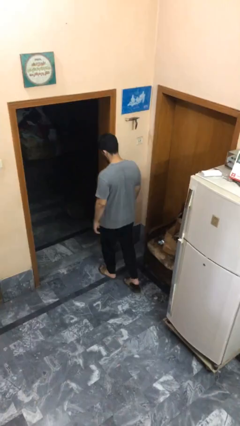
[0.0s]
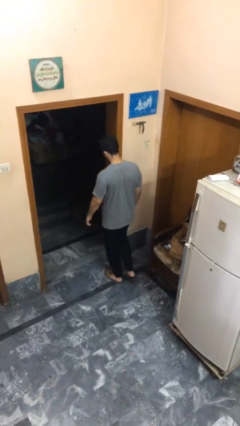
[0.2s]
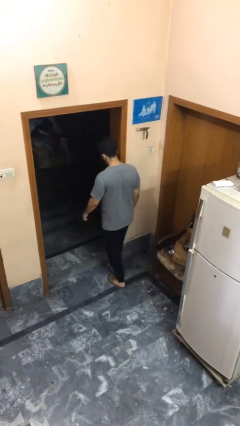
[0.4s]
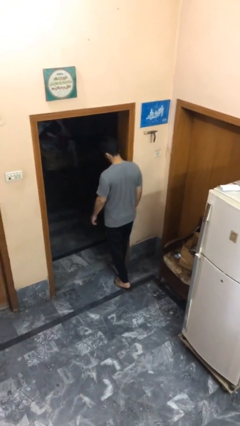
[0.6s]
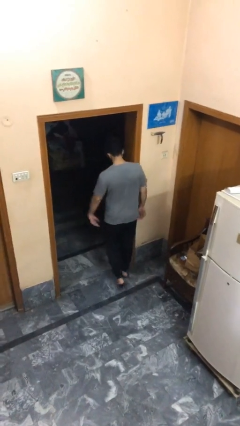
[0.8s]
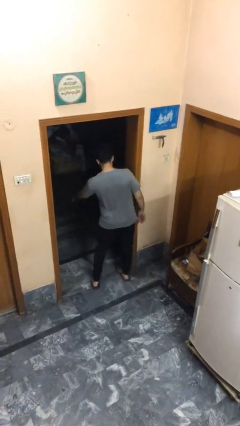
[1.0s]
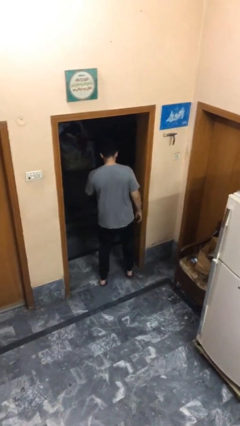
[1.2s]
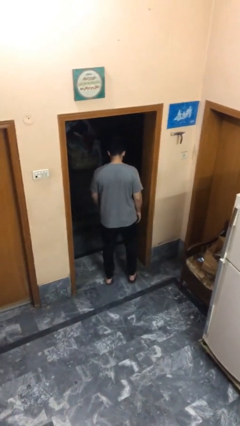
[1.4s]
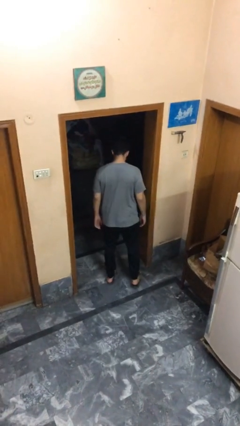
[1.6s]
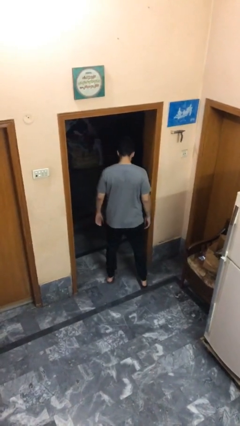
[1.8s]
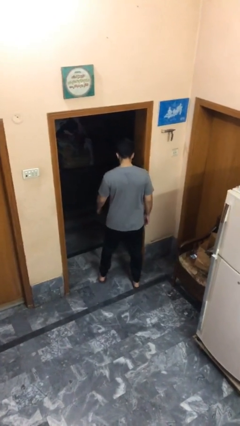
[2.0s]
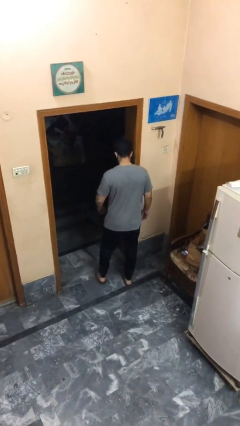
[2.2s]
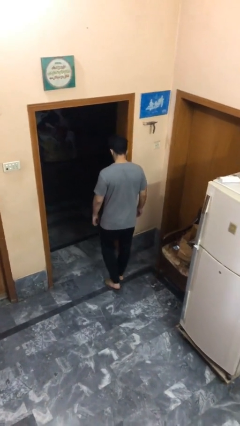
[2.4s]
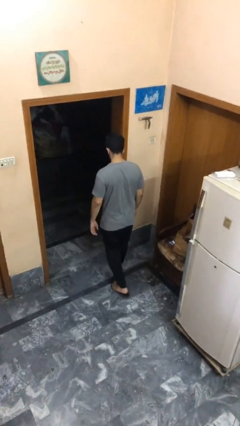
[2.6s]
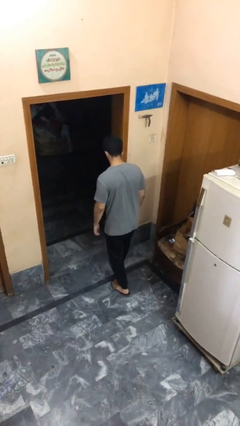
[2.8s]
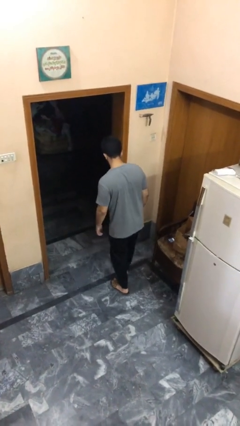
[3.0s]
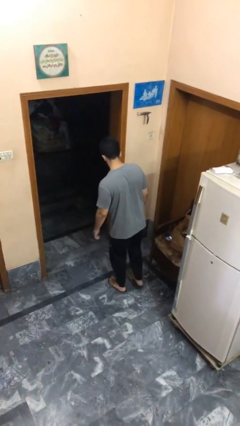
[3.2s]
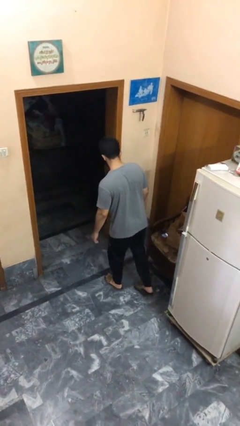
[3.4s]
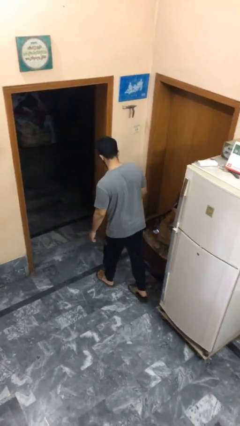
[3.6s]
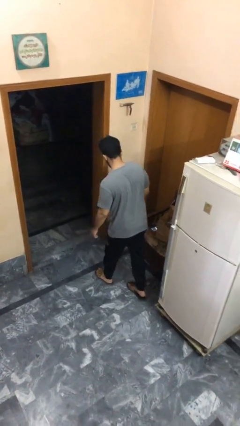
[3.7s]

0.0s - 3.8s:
person bumps into wall

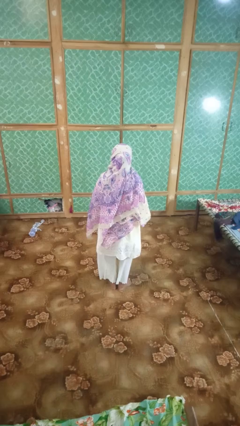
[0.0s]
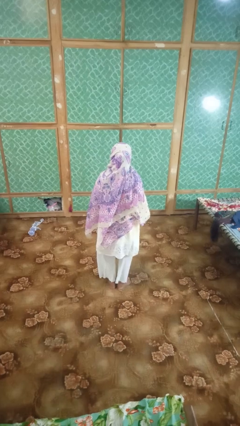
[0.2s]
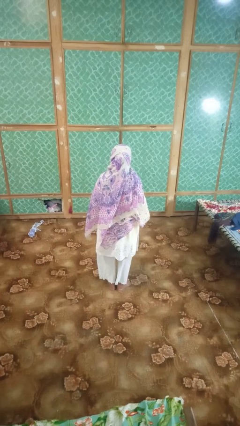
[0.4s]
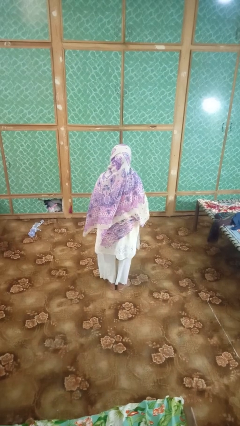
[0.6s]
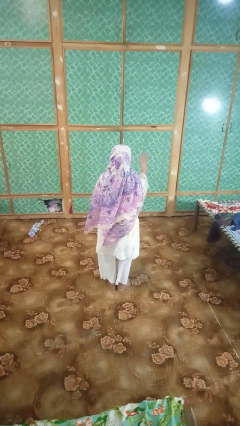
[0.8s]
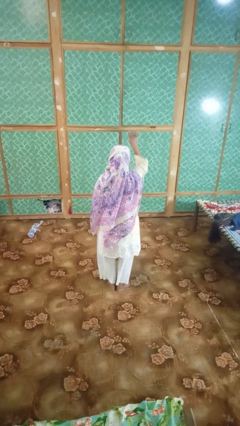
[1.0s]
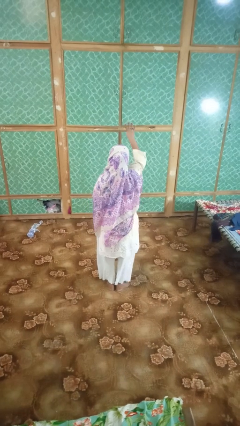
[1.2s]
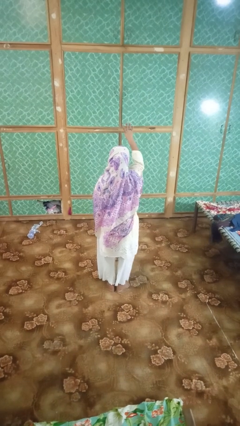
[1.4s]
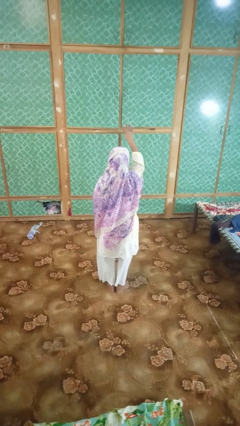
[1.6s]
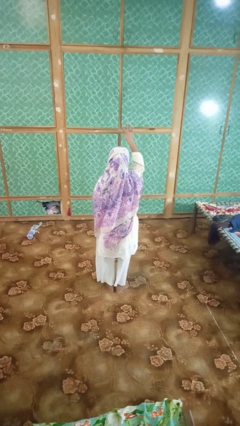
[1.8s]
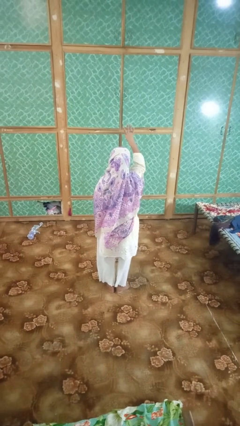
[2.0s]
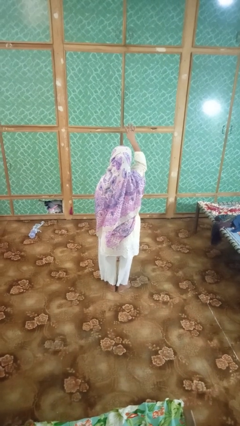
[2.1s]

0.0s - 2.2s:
person gestures number four

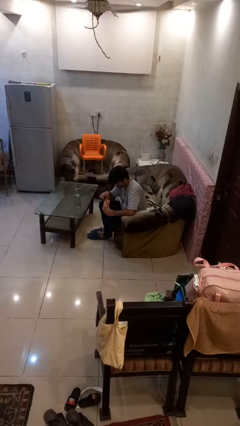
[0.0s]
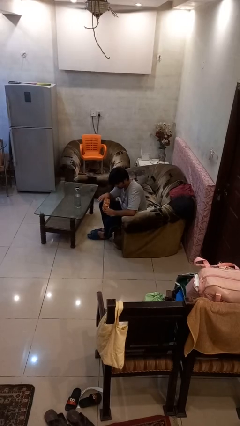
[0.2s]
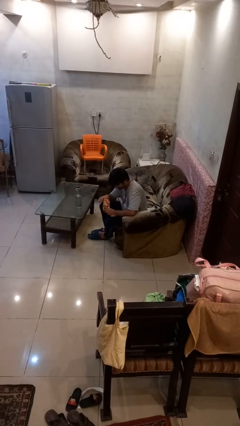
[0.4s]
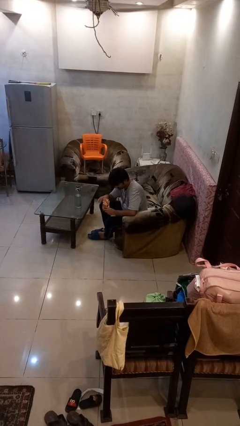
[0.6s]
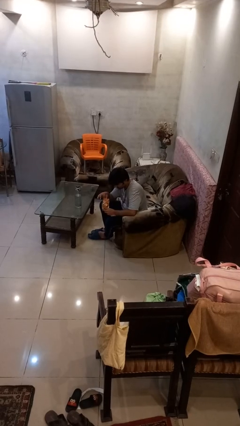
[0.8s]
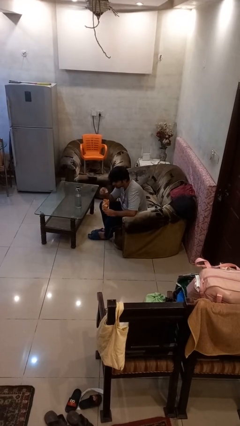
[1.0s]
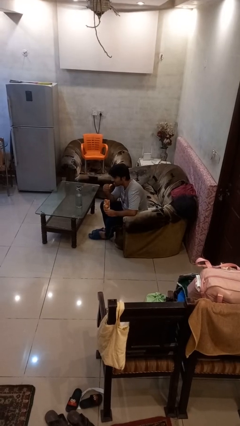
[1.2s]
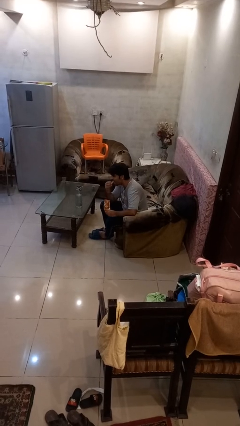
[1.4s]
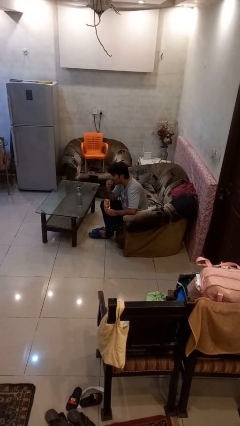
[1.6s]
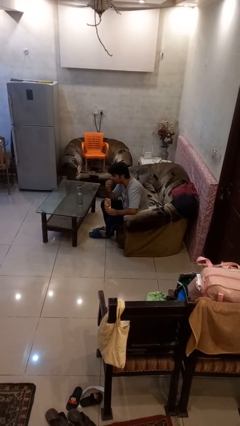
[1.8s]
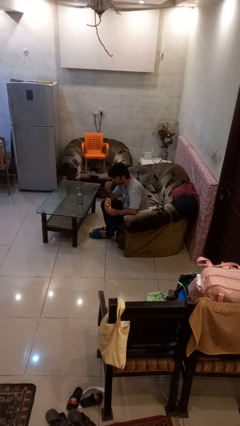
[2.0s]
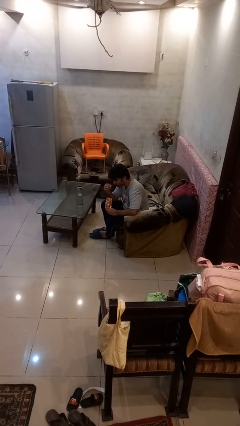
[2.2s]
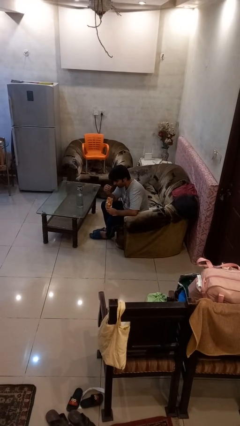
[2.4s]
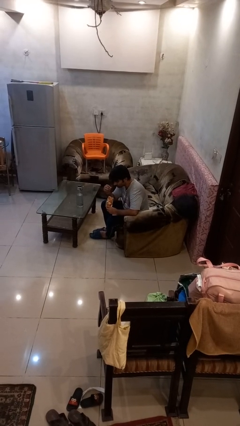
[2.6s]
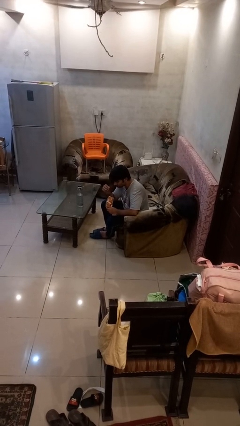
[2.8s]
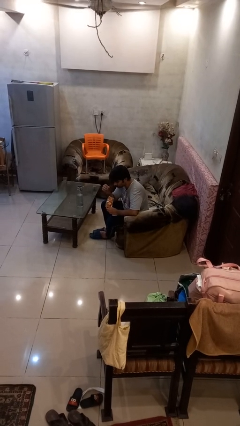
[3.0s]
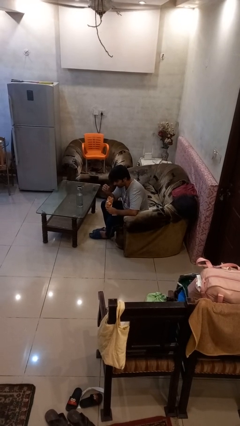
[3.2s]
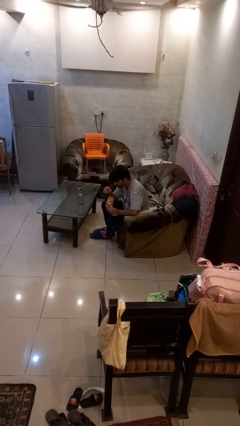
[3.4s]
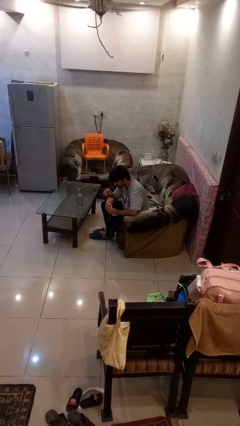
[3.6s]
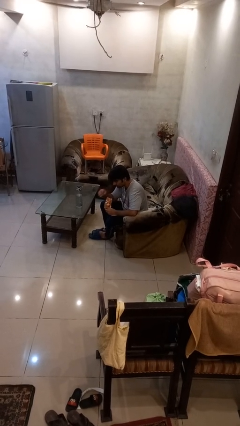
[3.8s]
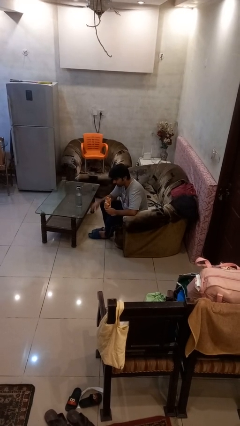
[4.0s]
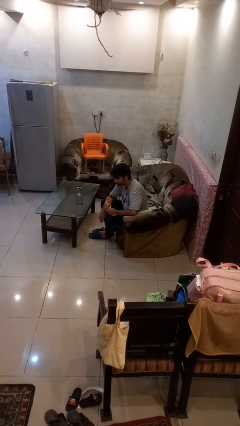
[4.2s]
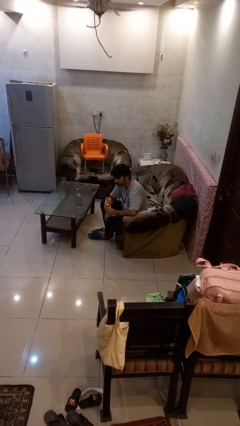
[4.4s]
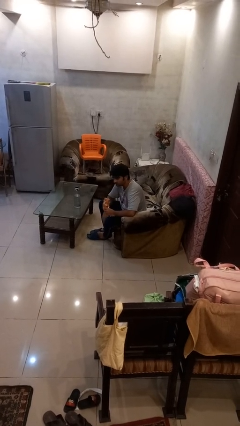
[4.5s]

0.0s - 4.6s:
person eats snack from bag

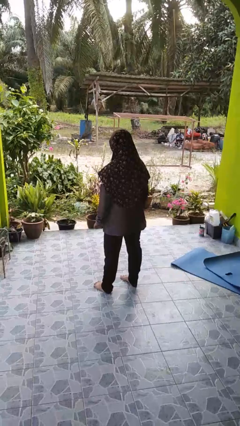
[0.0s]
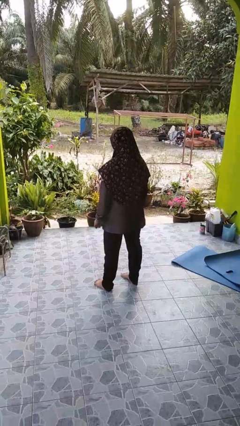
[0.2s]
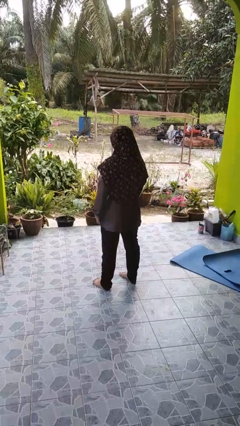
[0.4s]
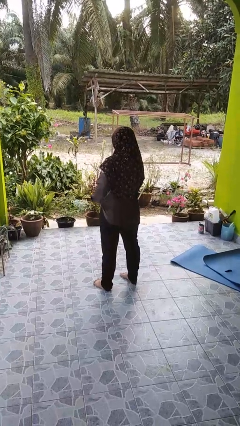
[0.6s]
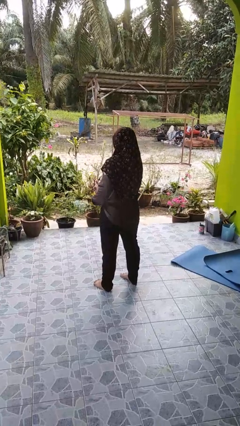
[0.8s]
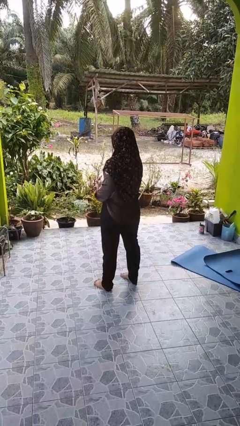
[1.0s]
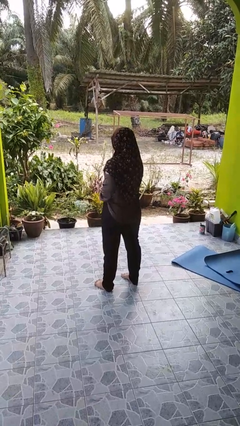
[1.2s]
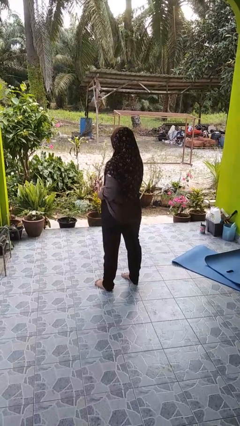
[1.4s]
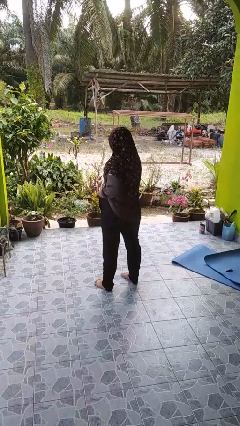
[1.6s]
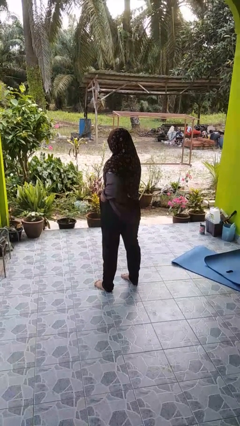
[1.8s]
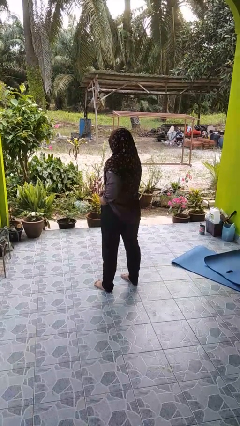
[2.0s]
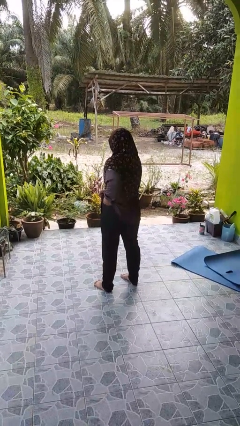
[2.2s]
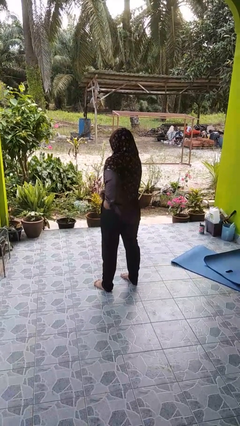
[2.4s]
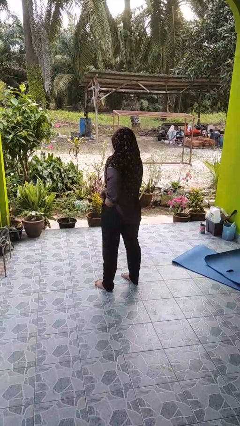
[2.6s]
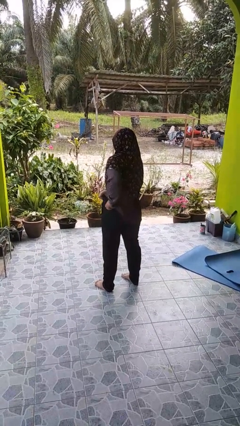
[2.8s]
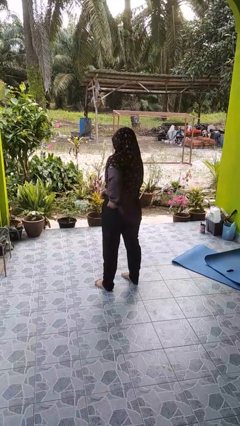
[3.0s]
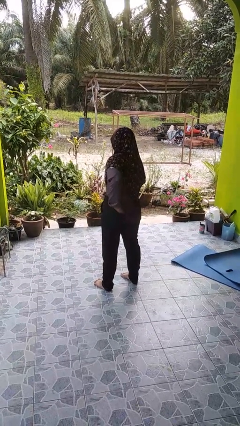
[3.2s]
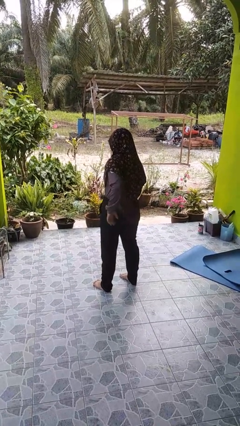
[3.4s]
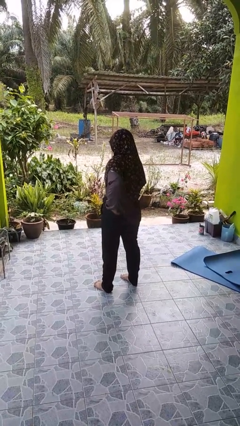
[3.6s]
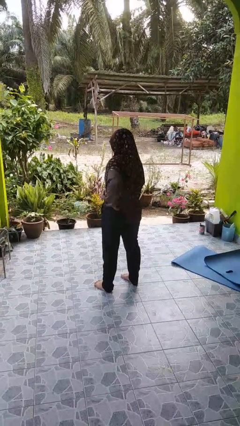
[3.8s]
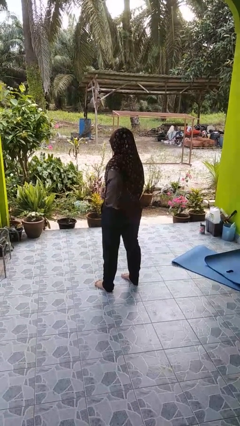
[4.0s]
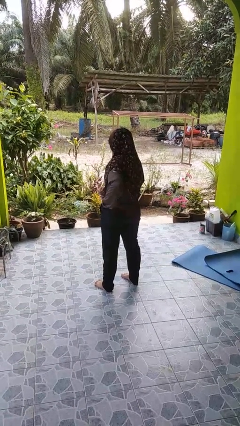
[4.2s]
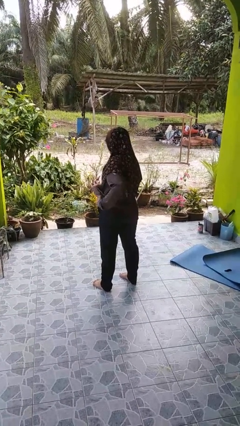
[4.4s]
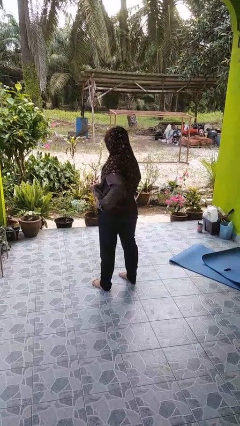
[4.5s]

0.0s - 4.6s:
person tucks in shirt

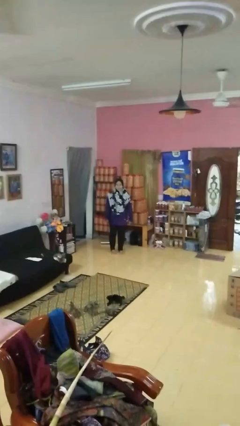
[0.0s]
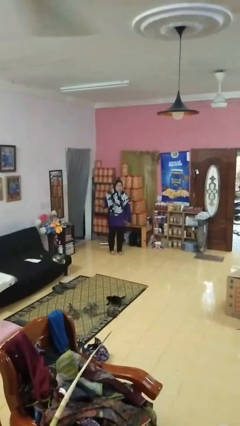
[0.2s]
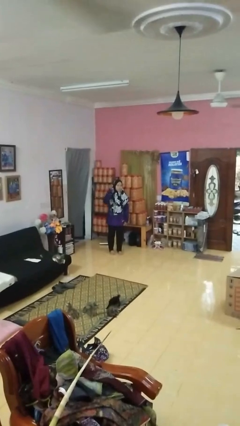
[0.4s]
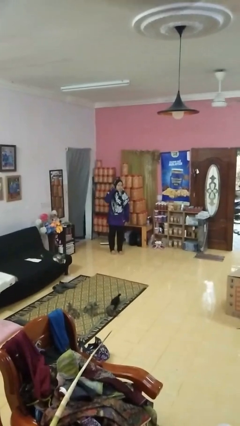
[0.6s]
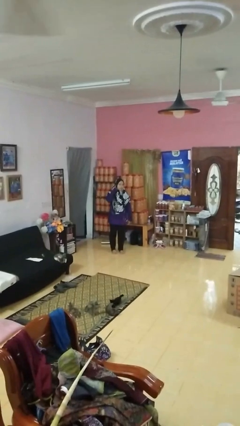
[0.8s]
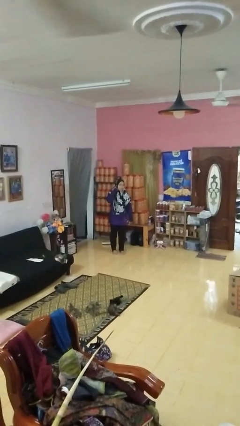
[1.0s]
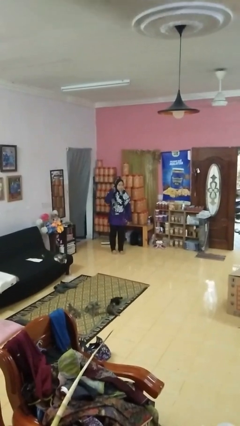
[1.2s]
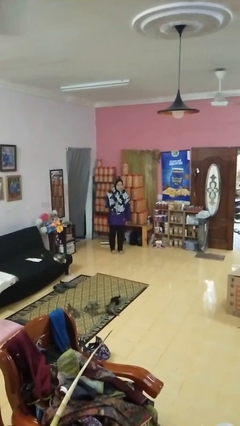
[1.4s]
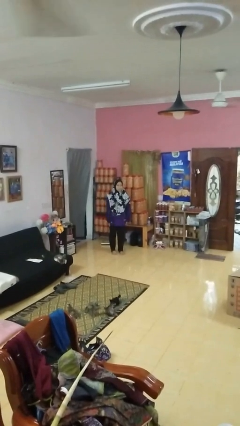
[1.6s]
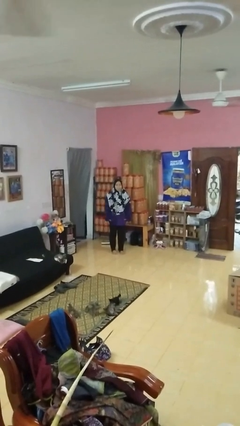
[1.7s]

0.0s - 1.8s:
person gestures listen closely

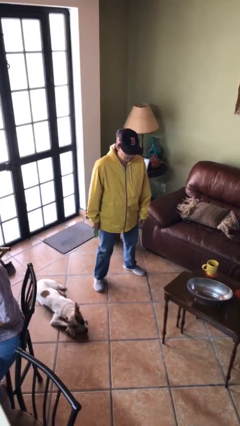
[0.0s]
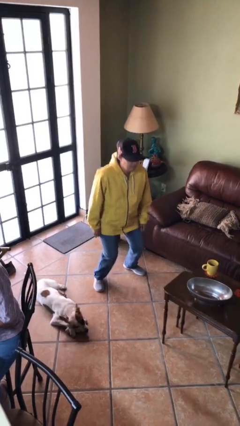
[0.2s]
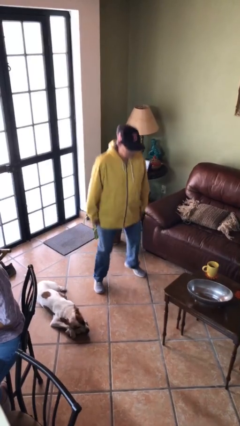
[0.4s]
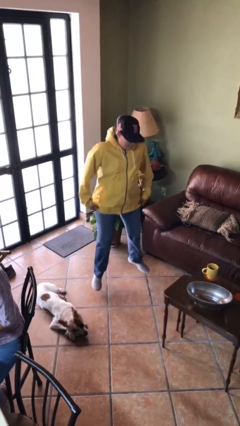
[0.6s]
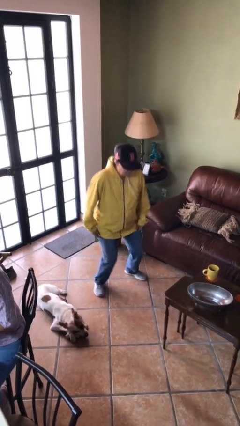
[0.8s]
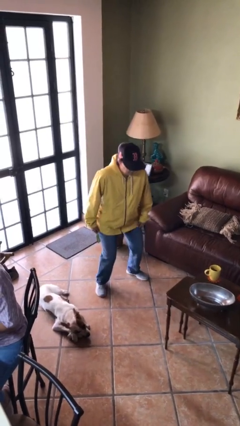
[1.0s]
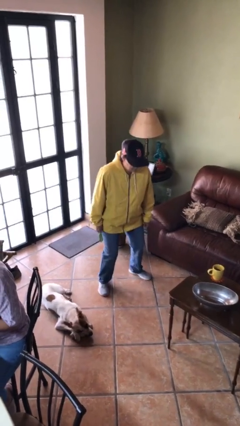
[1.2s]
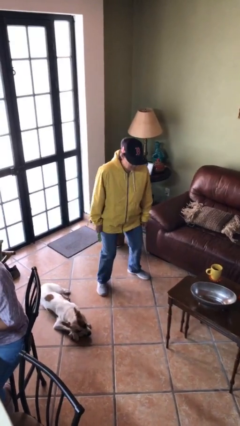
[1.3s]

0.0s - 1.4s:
person jumps
